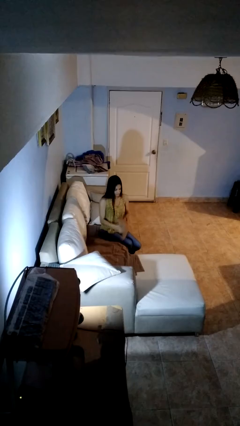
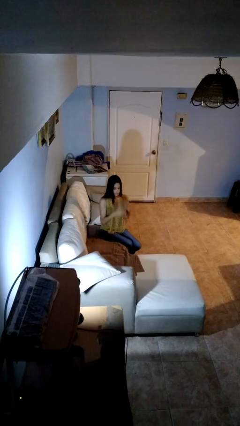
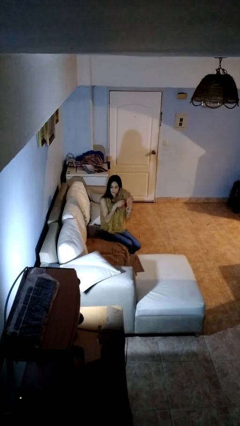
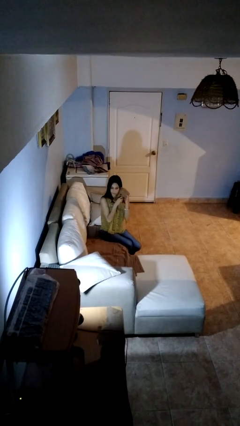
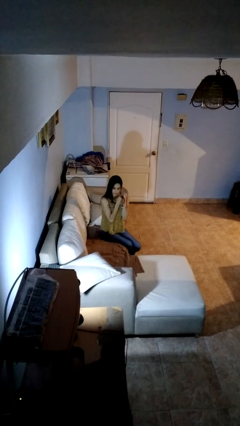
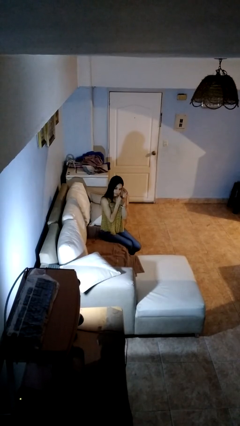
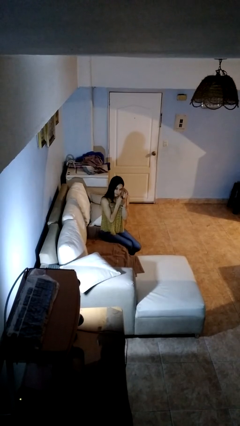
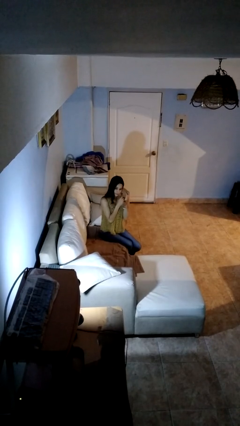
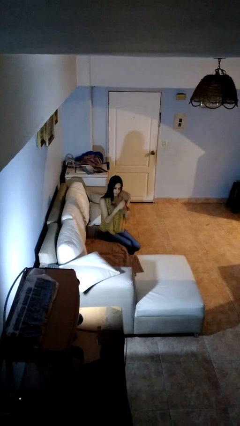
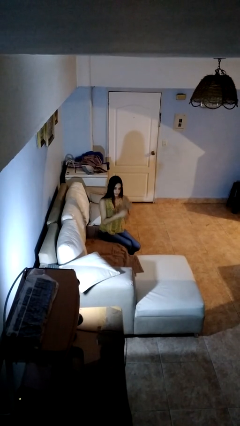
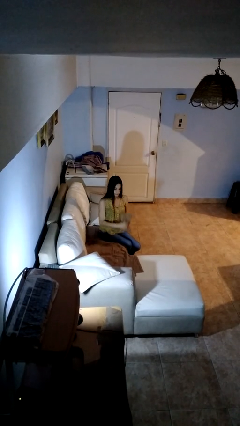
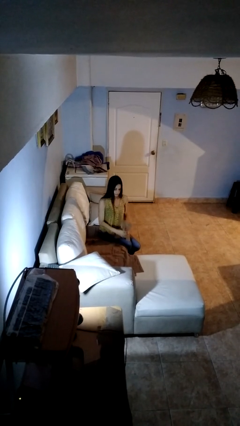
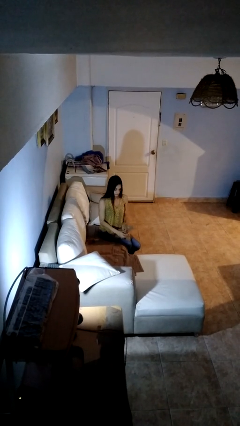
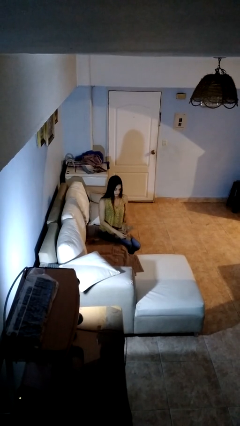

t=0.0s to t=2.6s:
person hugs stuffed animal

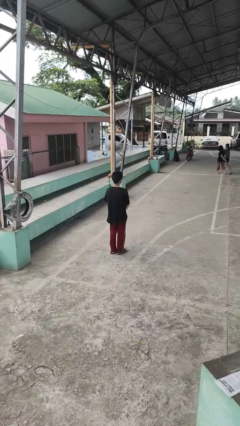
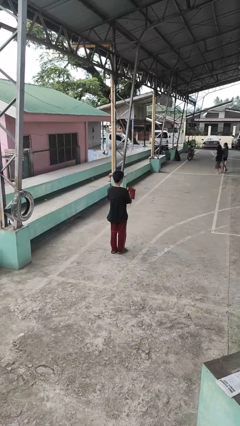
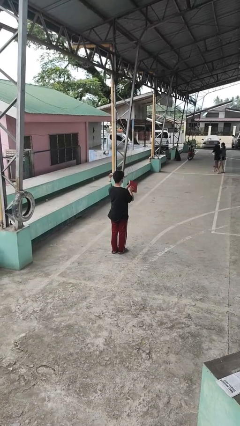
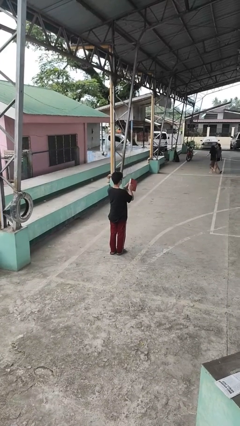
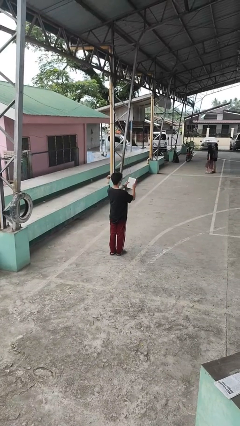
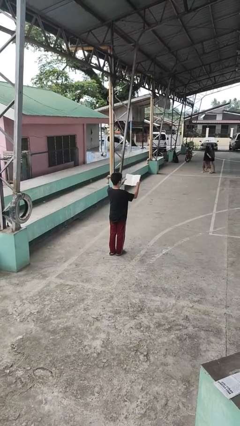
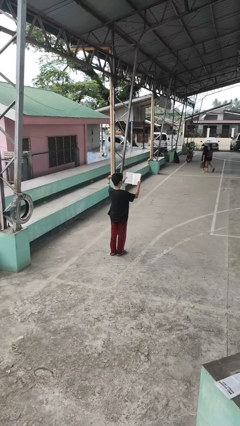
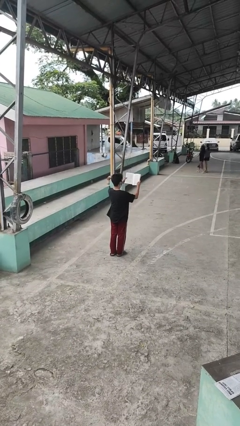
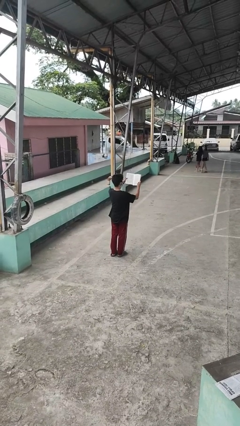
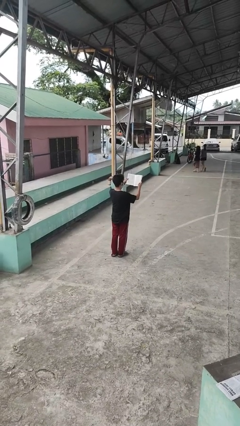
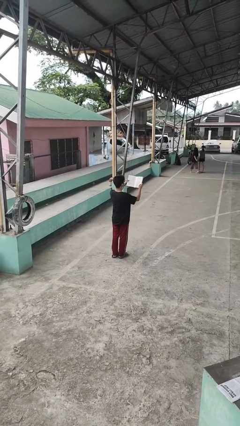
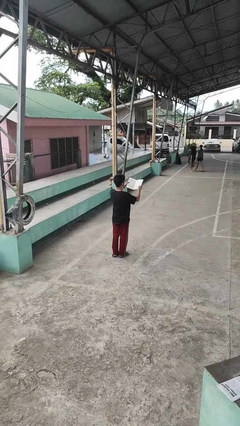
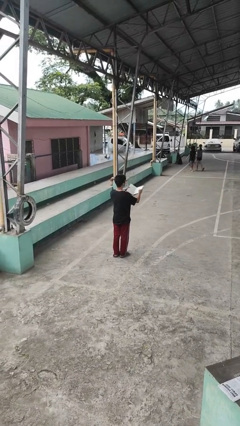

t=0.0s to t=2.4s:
person reads book

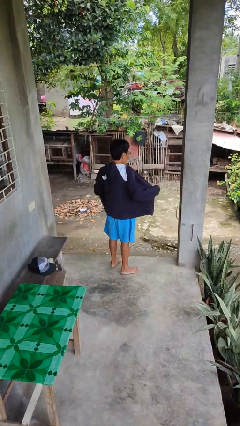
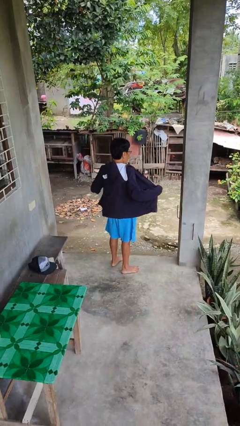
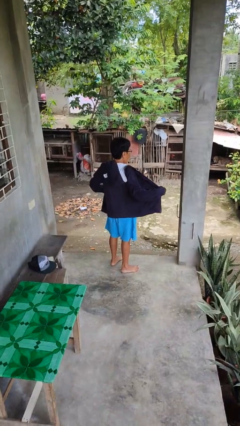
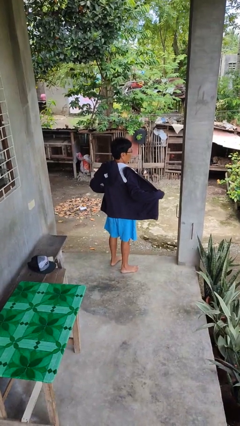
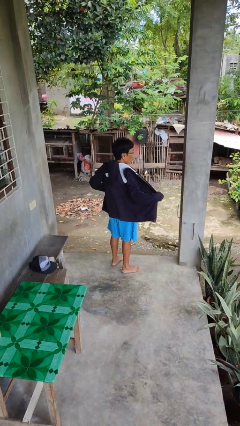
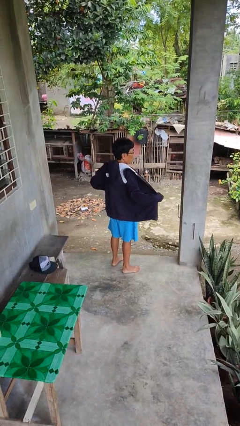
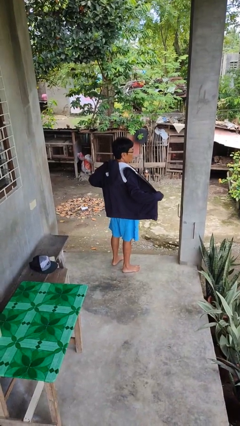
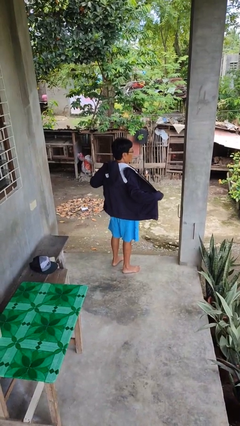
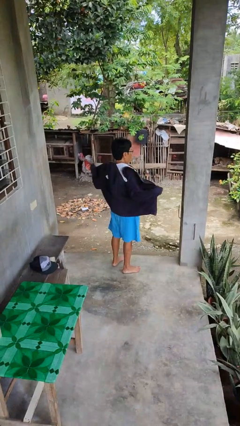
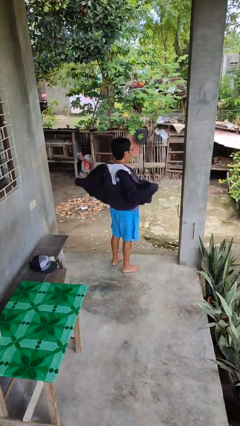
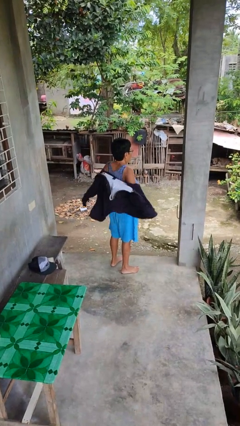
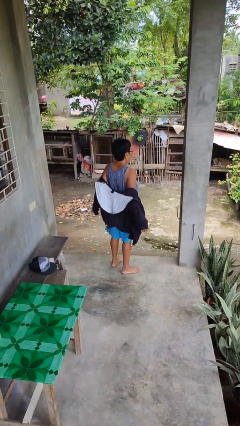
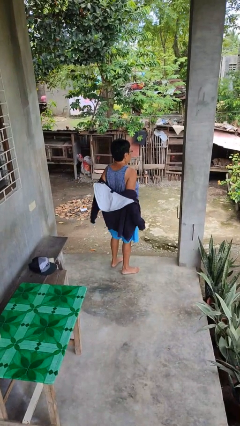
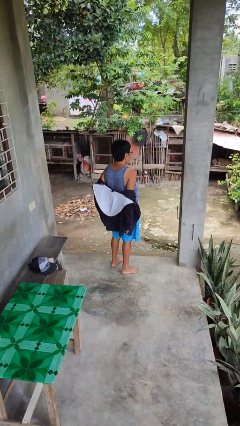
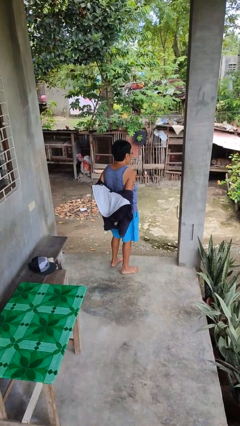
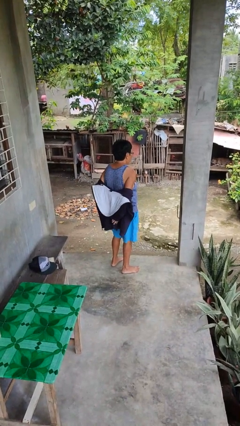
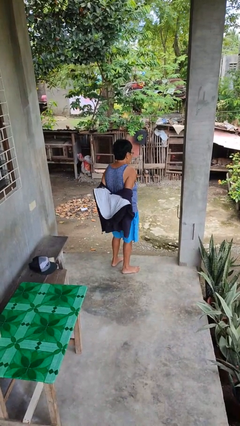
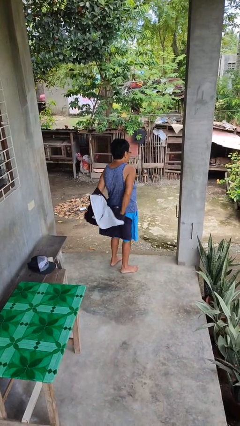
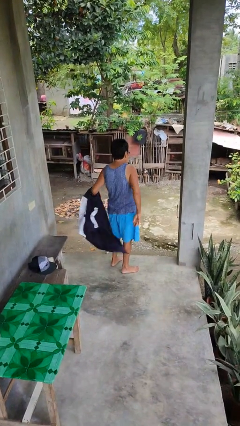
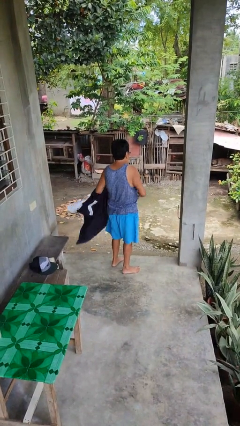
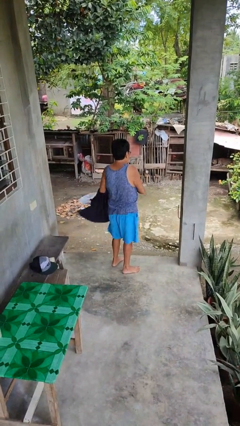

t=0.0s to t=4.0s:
person takes off jacket

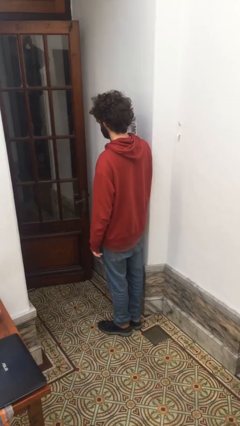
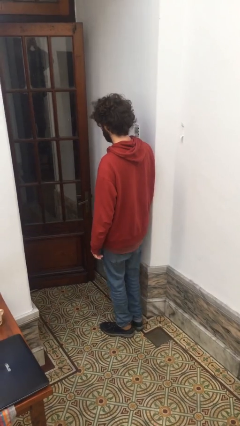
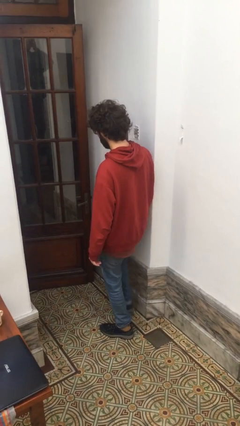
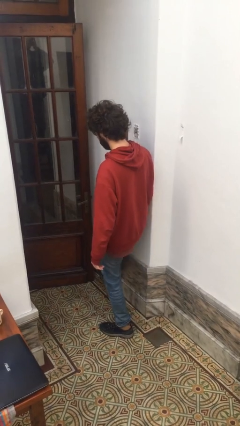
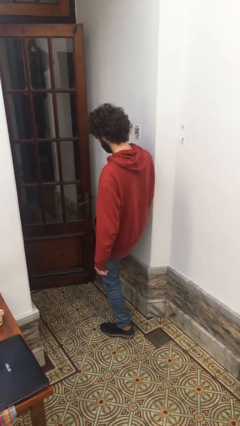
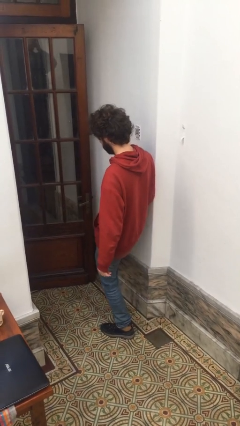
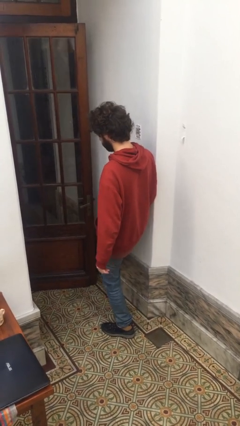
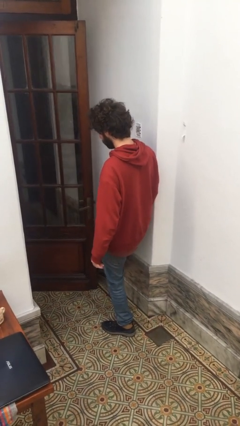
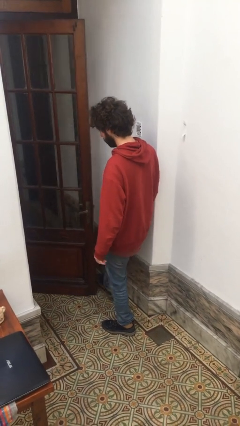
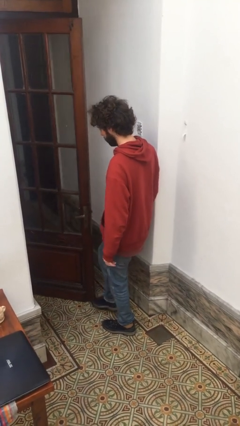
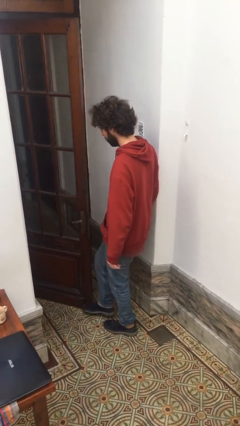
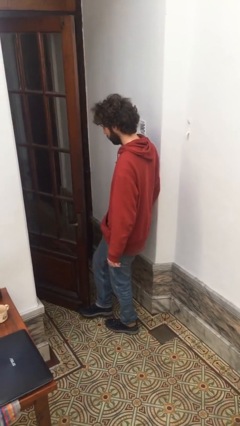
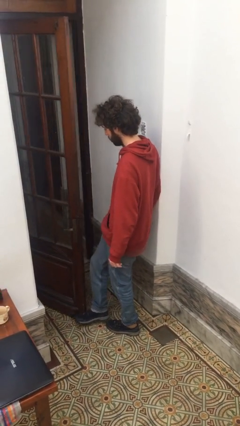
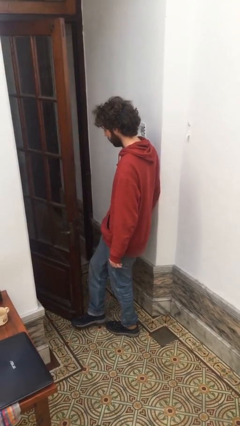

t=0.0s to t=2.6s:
person opens facility door

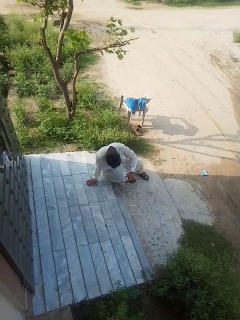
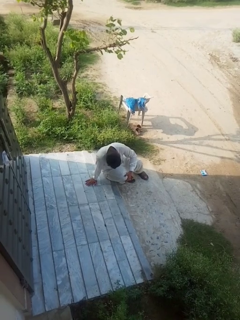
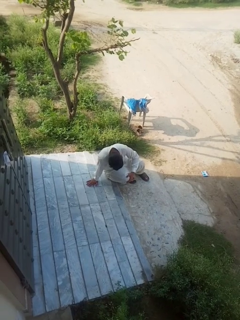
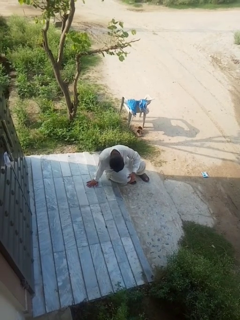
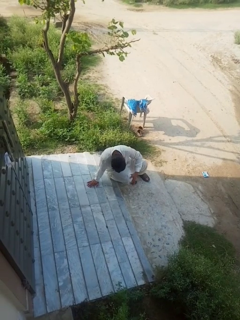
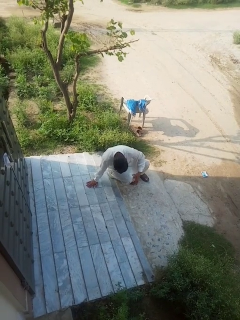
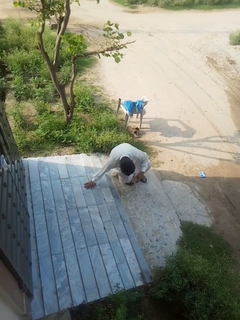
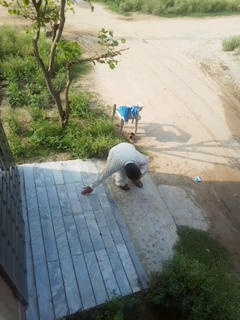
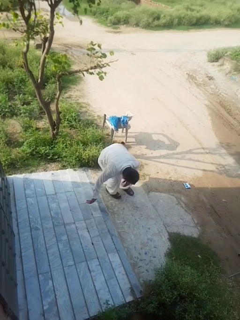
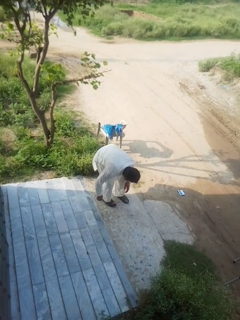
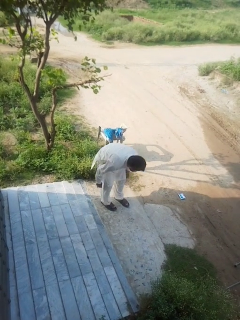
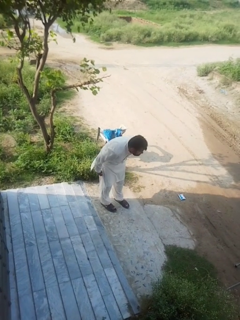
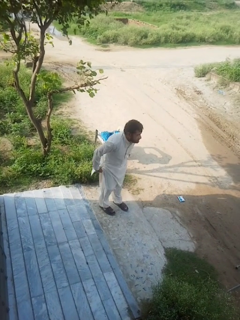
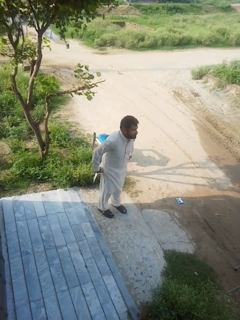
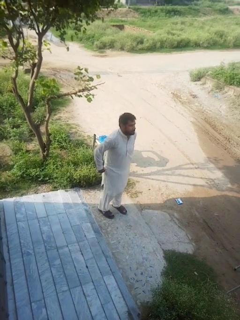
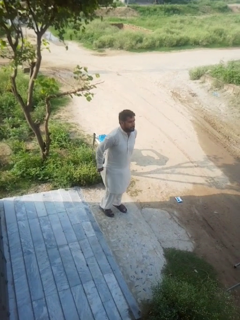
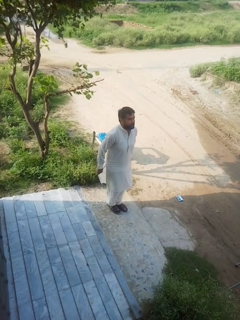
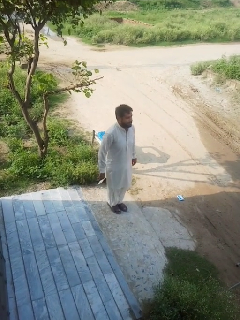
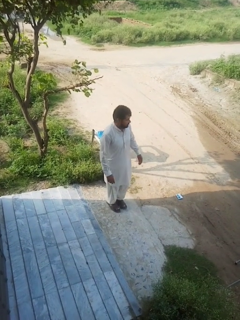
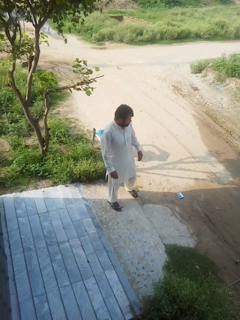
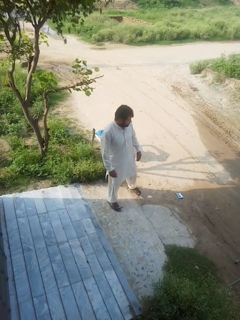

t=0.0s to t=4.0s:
person stands up from floor

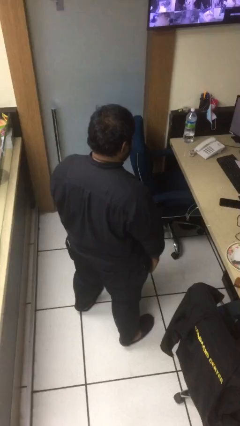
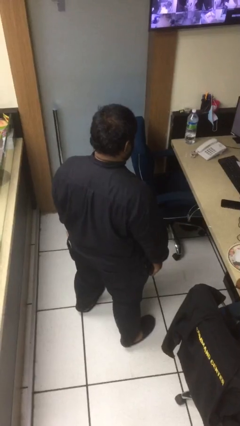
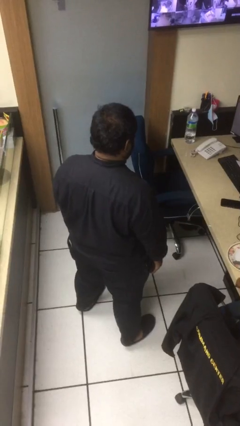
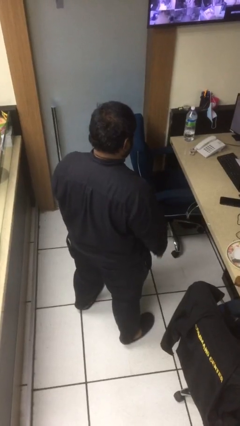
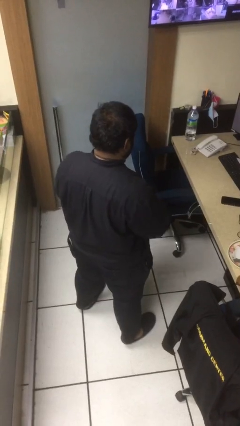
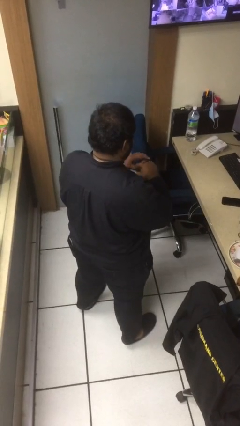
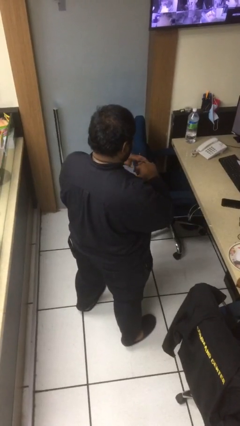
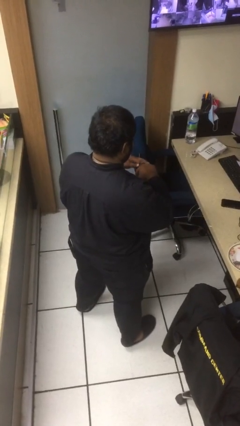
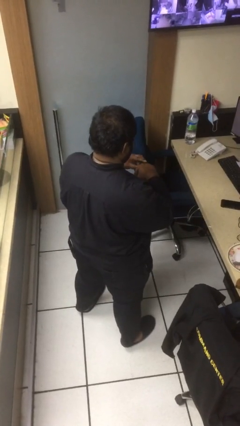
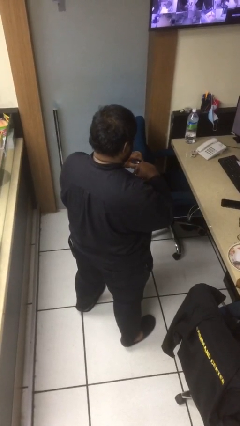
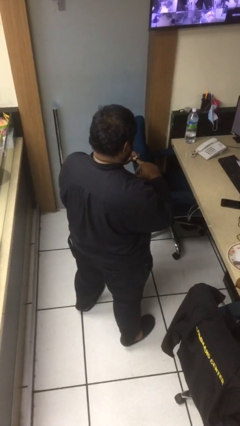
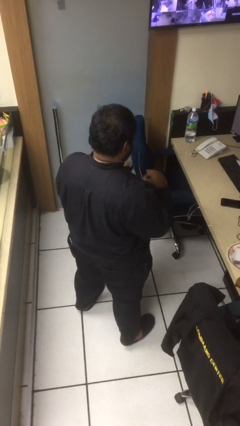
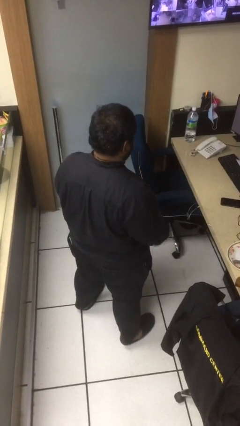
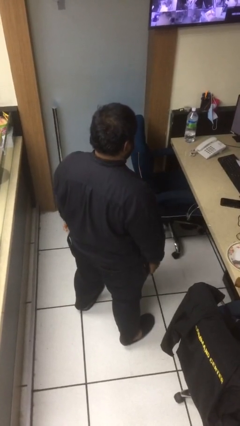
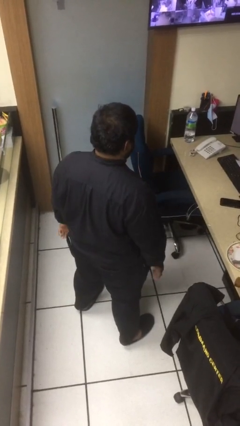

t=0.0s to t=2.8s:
person takes off ring
